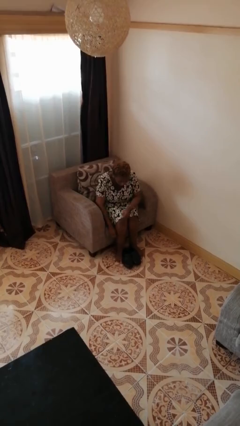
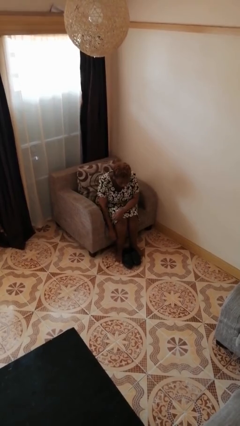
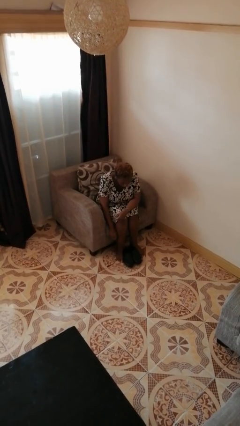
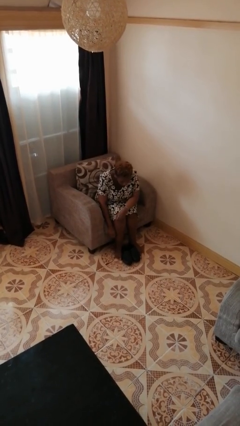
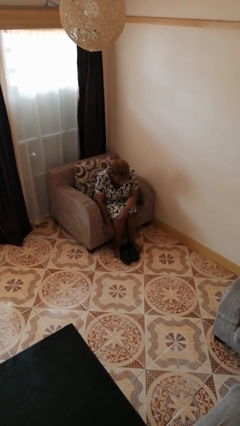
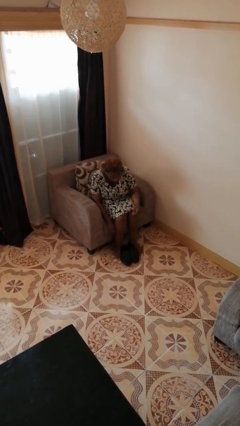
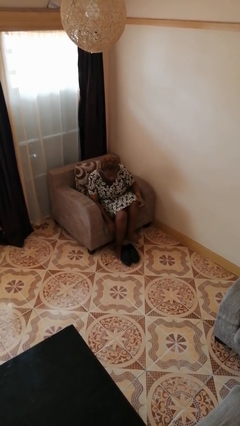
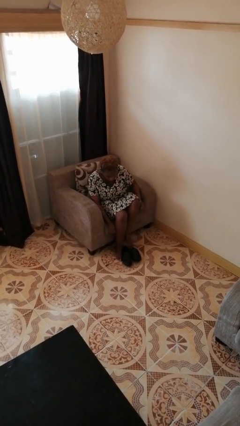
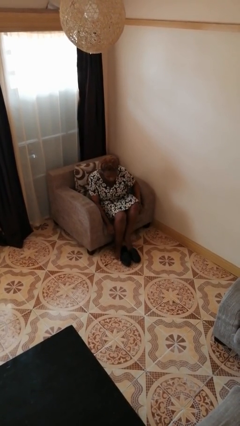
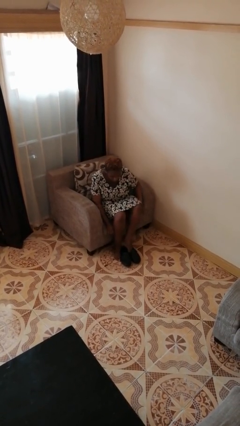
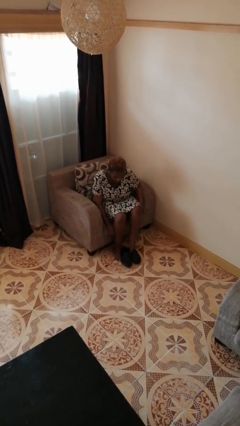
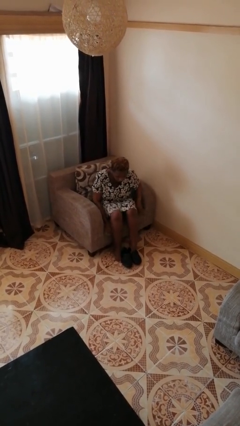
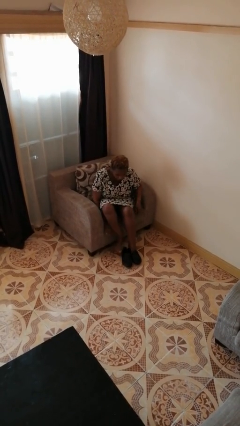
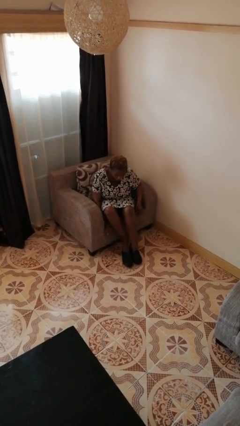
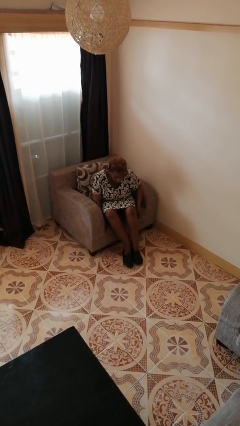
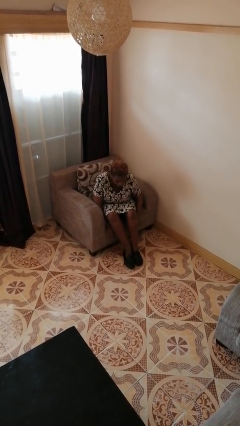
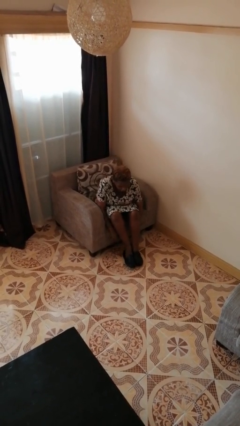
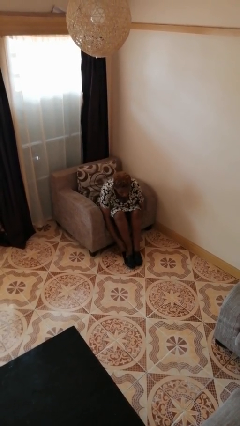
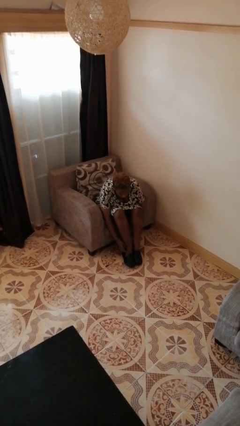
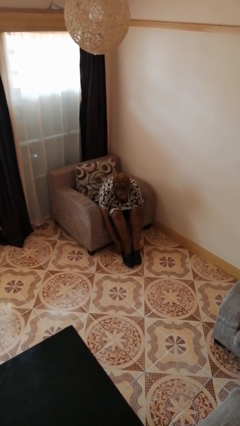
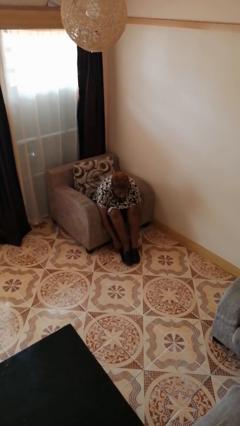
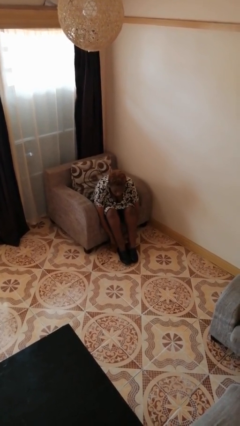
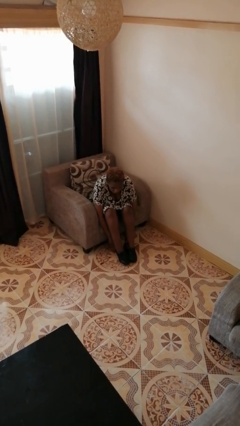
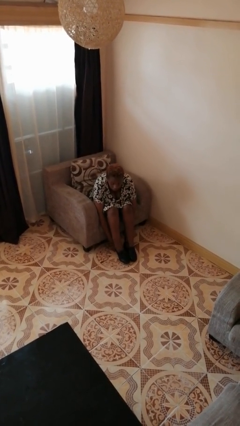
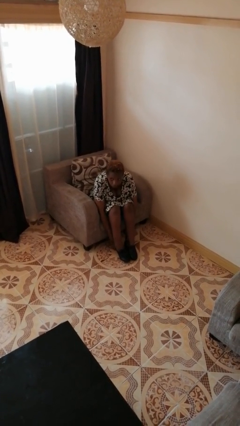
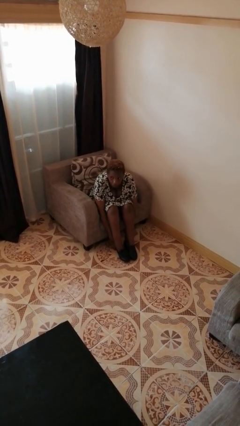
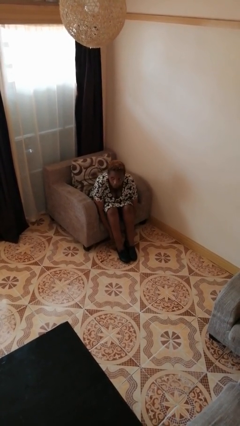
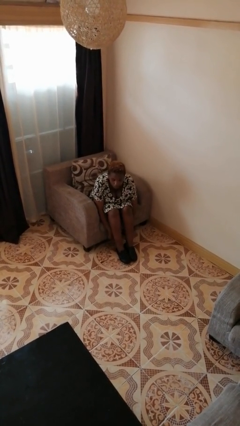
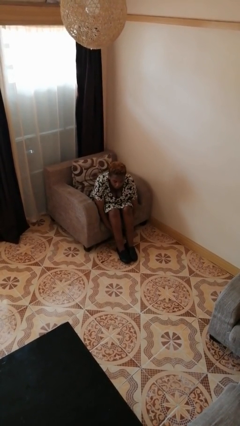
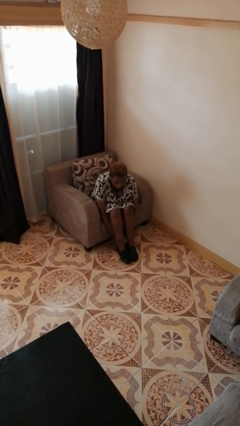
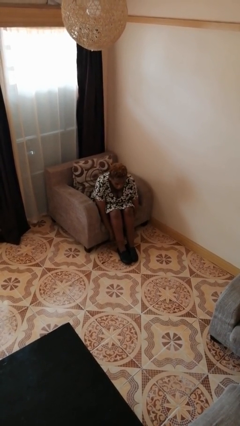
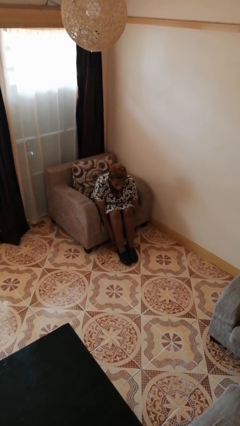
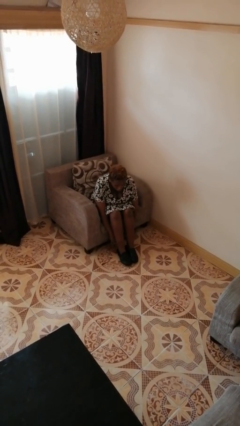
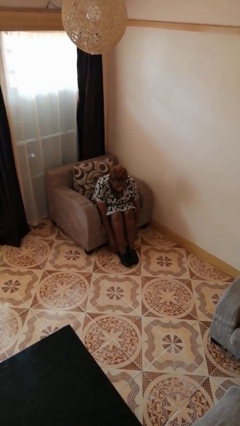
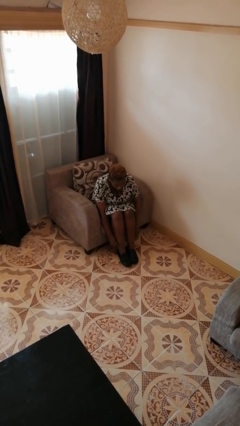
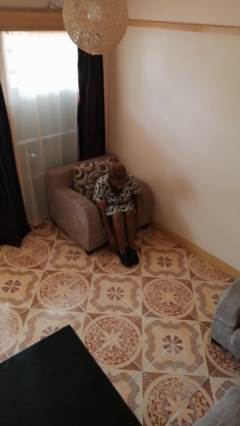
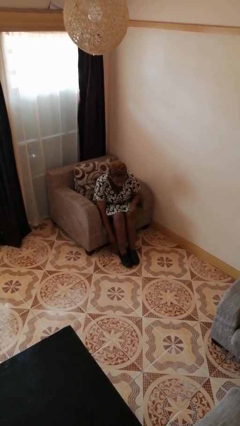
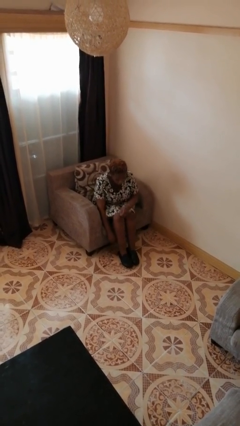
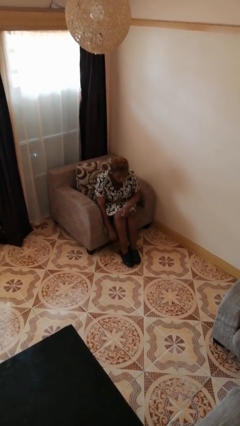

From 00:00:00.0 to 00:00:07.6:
person puts on shoes

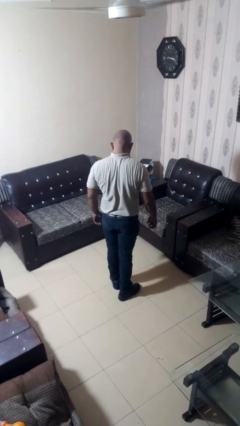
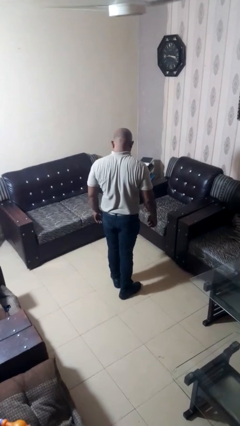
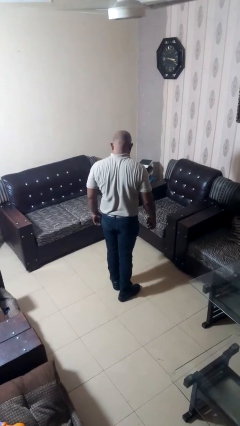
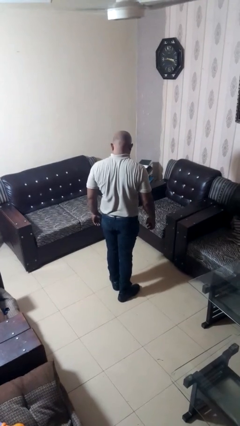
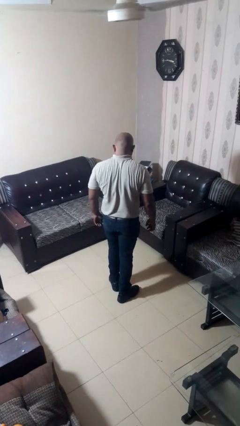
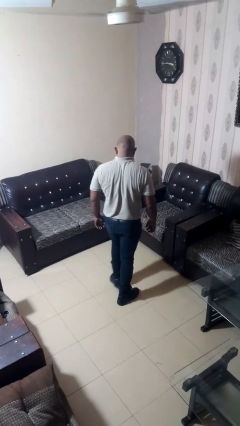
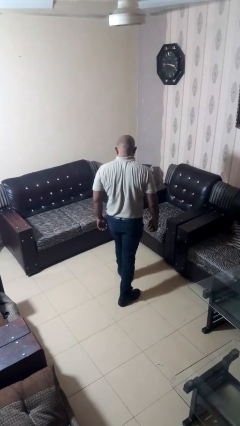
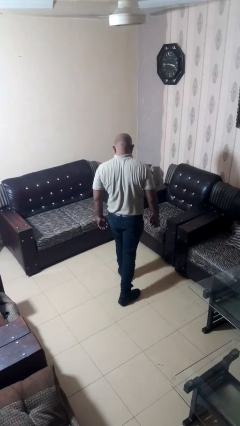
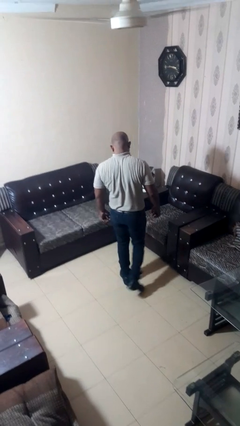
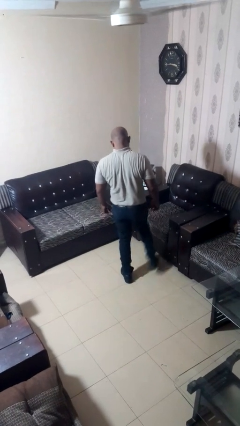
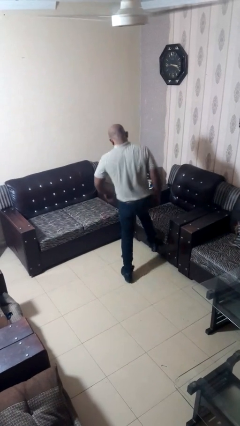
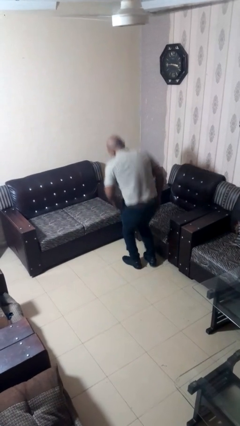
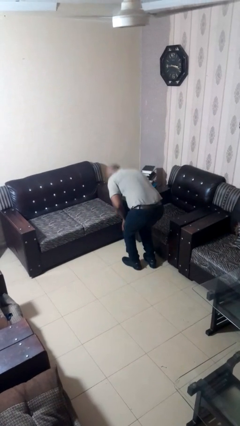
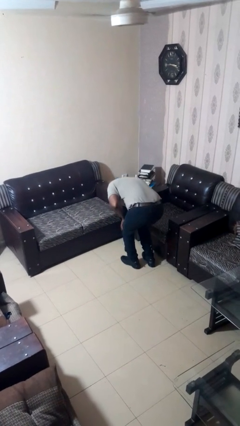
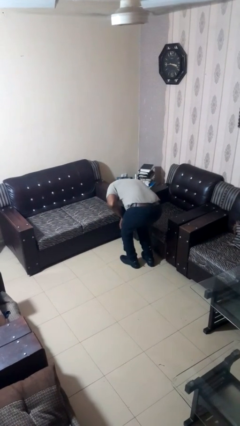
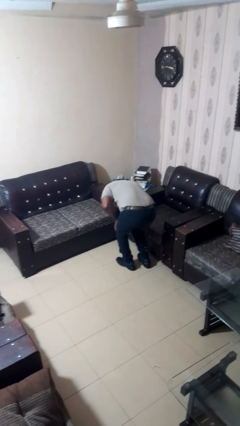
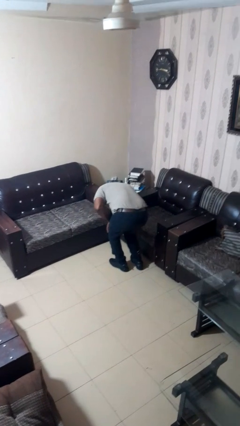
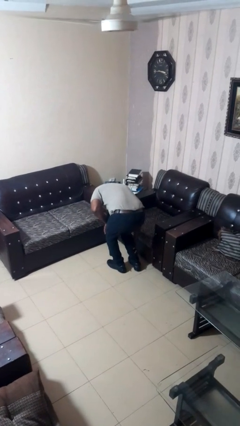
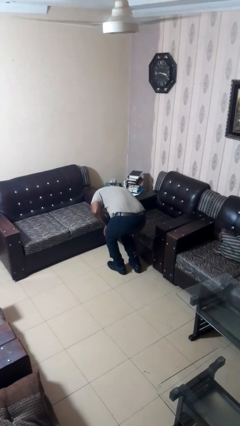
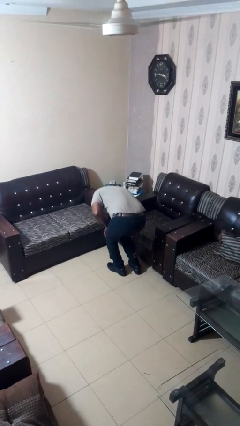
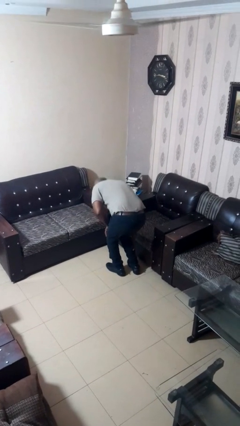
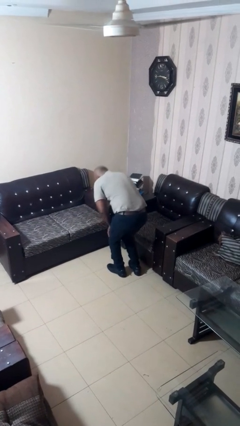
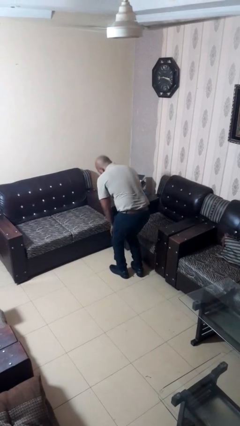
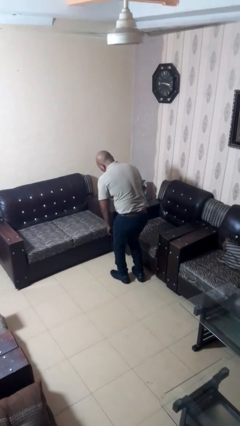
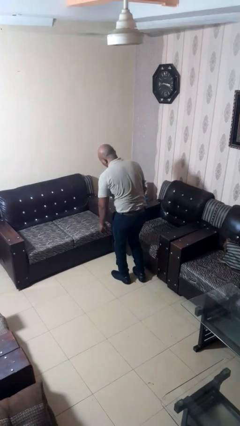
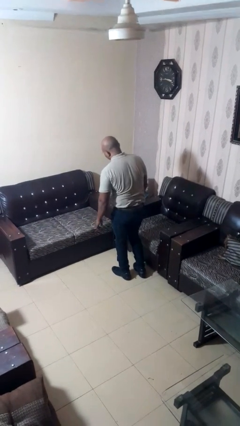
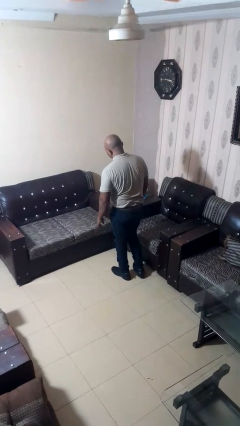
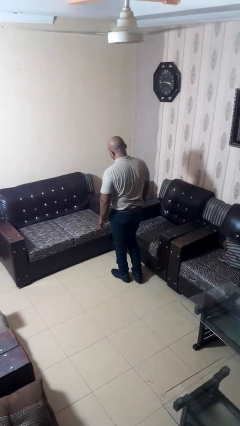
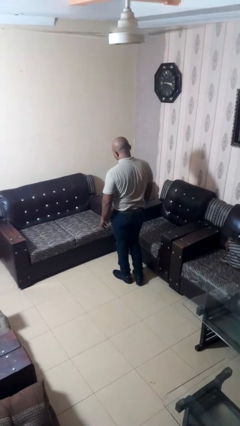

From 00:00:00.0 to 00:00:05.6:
person stubs toe

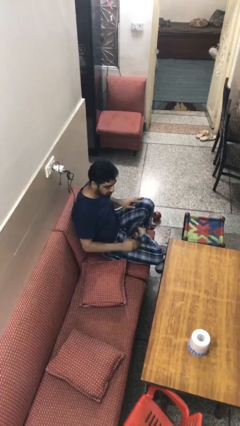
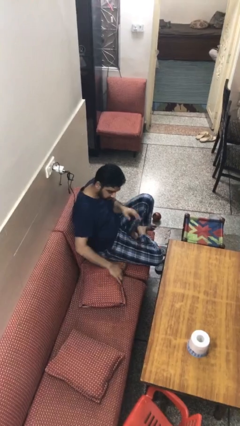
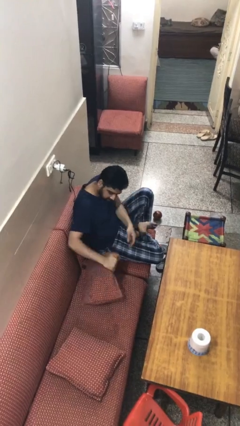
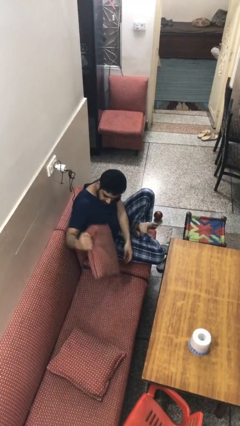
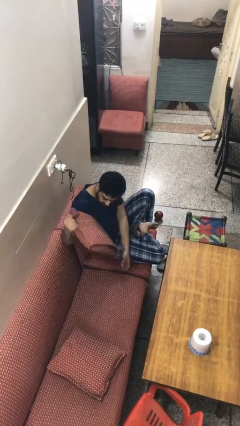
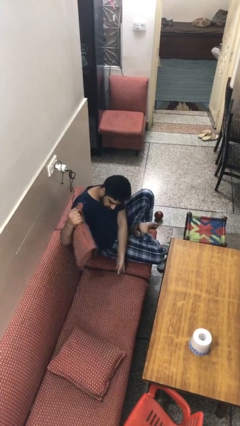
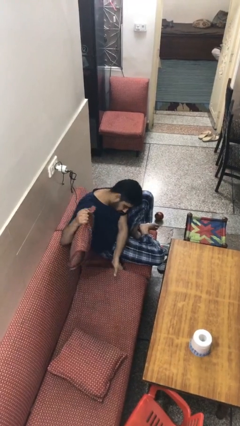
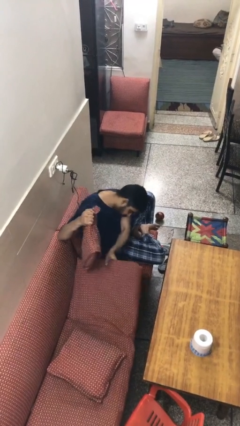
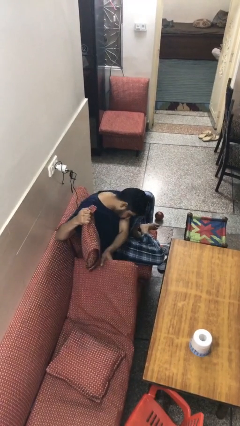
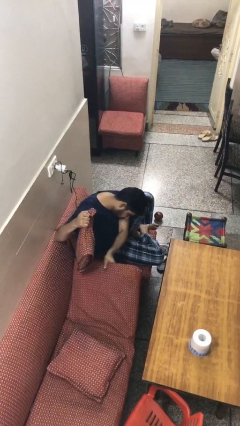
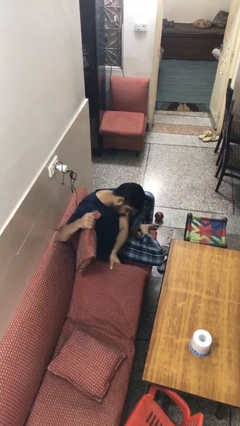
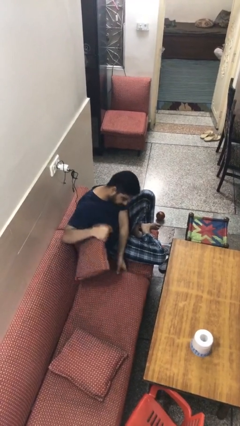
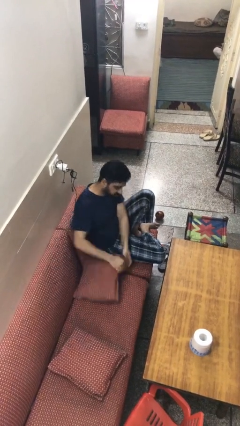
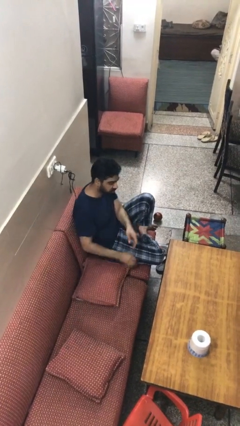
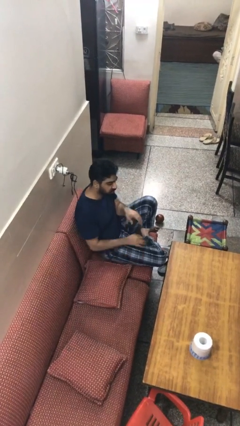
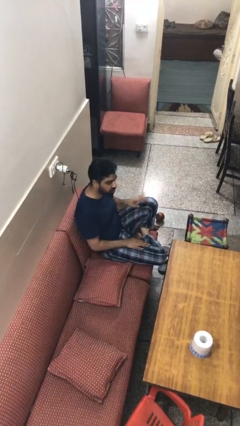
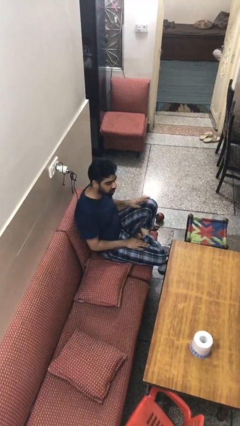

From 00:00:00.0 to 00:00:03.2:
person searches under couch

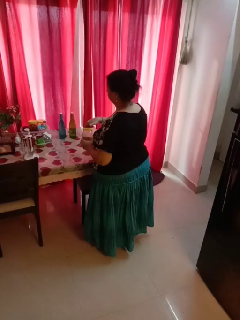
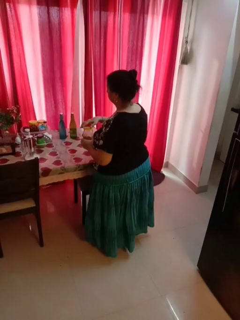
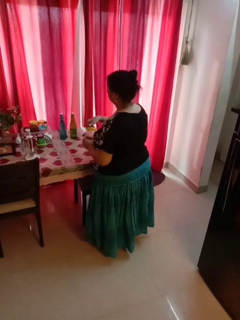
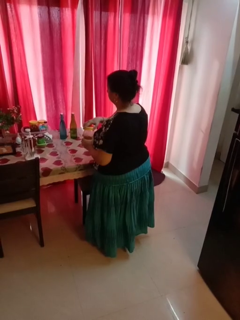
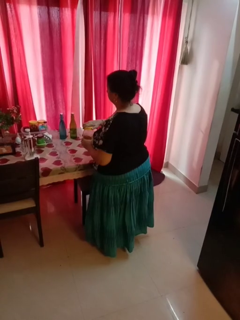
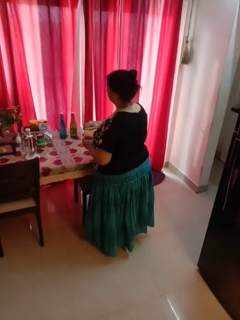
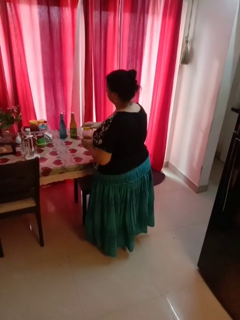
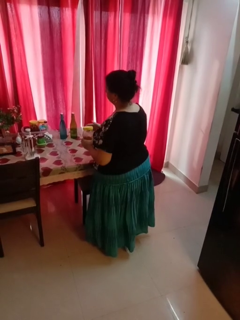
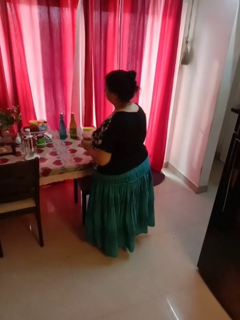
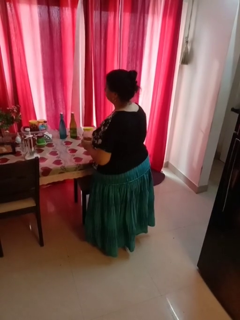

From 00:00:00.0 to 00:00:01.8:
person closes jar
